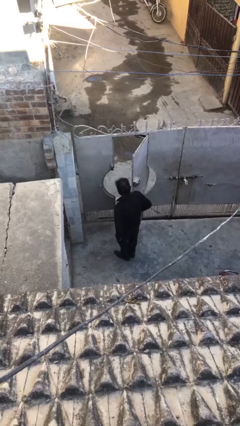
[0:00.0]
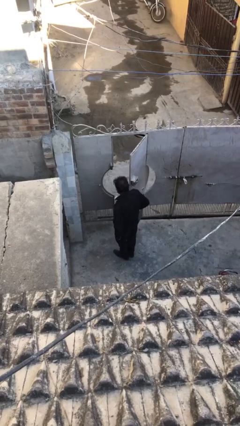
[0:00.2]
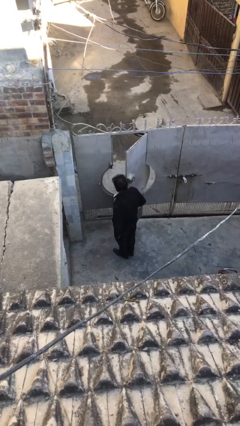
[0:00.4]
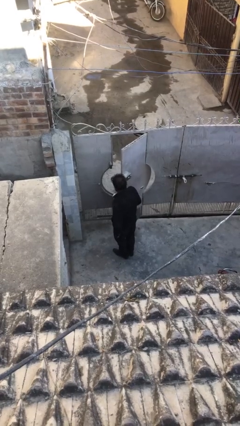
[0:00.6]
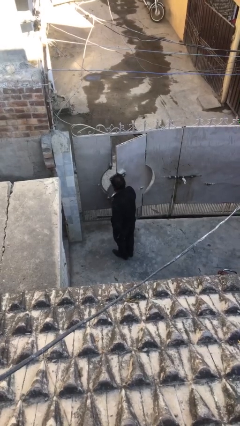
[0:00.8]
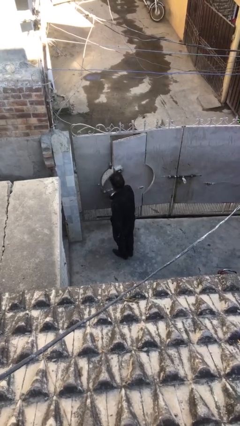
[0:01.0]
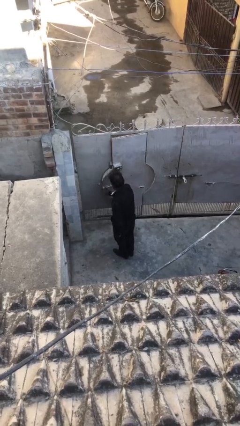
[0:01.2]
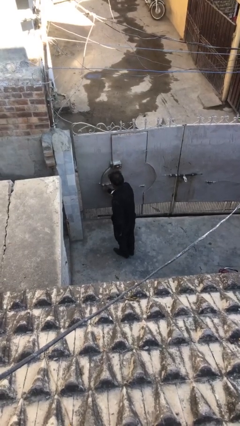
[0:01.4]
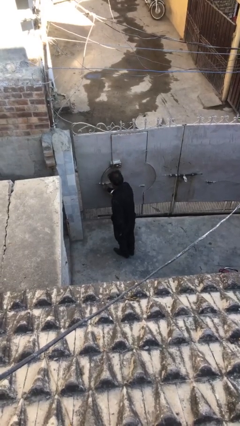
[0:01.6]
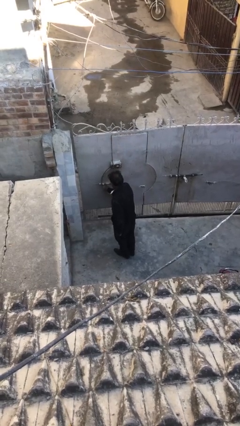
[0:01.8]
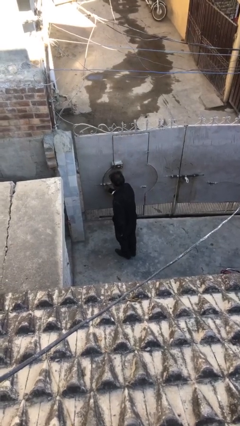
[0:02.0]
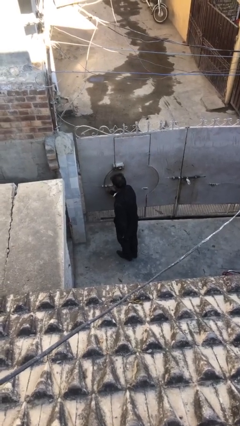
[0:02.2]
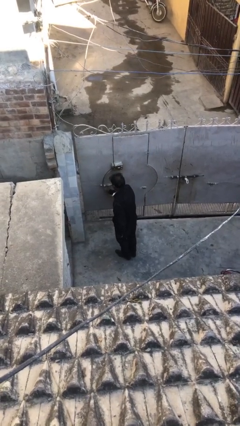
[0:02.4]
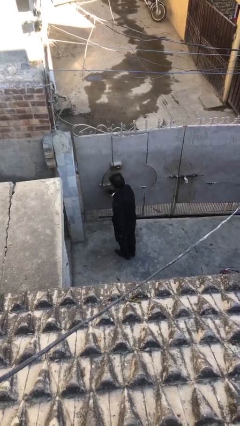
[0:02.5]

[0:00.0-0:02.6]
person closes facility door

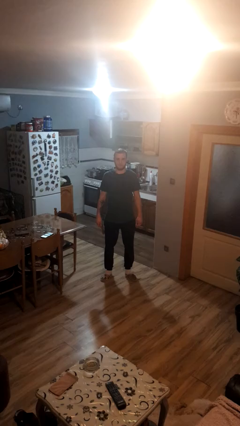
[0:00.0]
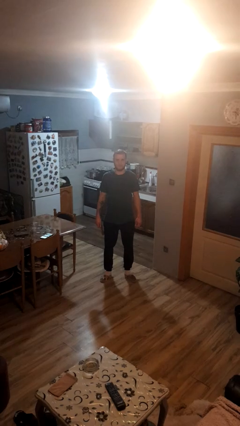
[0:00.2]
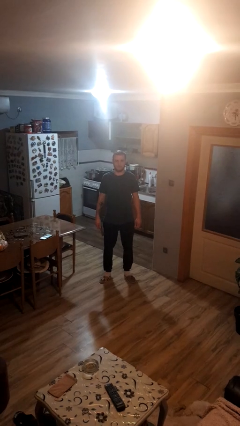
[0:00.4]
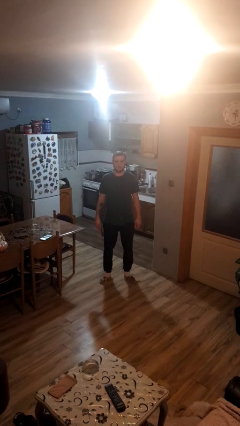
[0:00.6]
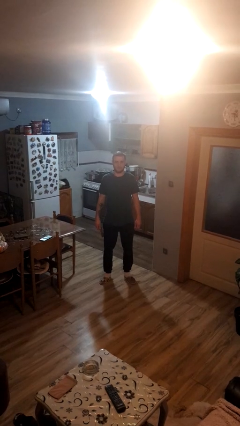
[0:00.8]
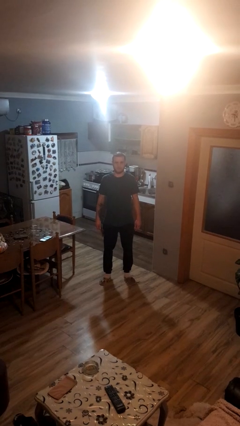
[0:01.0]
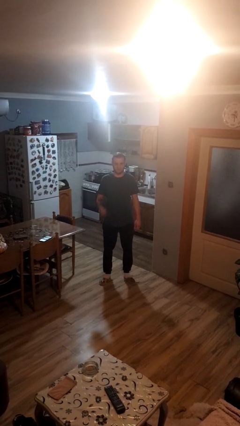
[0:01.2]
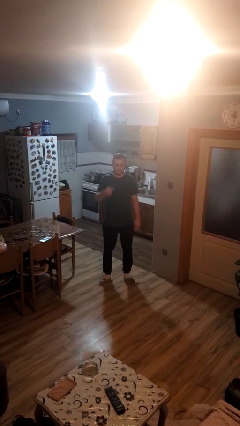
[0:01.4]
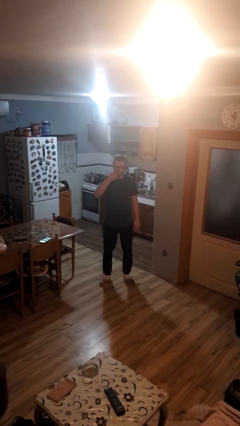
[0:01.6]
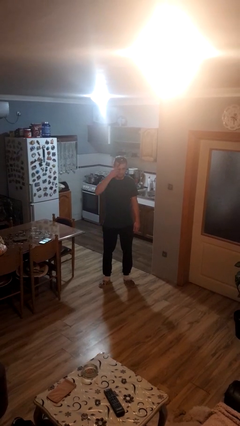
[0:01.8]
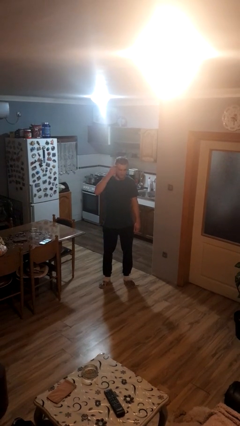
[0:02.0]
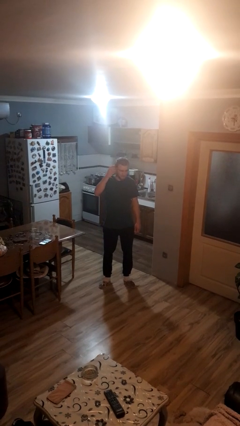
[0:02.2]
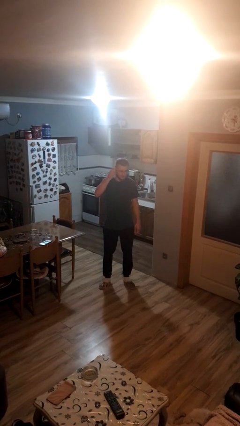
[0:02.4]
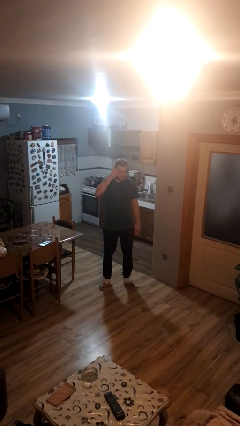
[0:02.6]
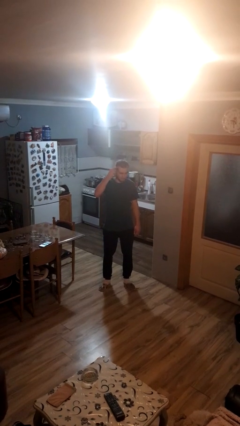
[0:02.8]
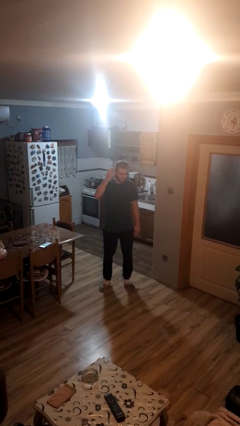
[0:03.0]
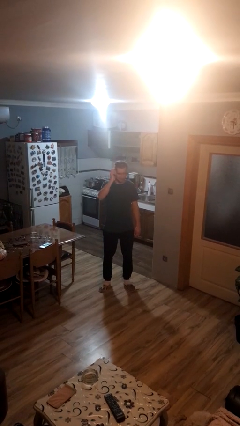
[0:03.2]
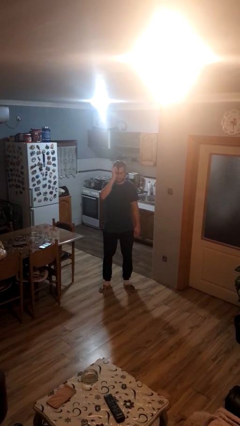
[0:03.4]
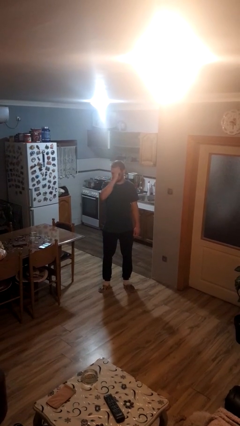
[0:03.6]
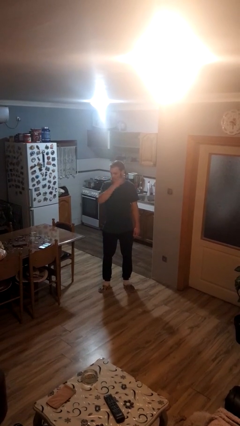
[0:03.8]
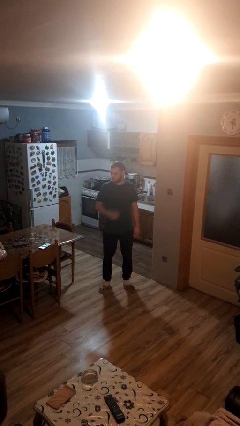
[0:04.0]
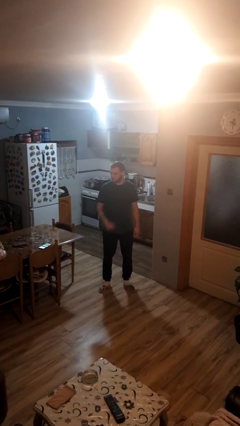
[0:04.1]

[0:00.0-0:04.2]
person brushes hair

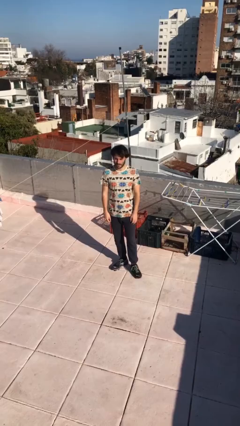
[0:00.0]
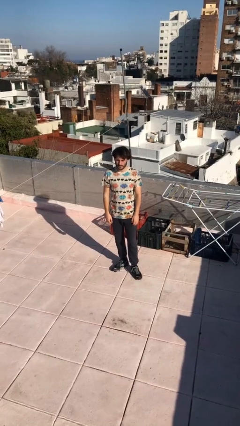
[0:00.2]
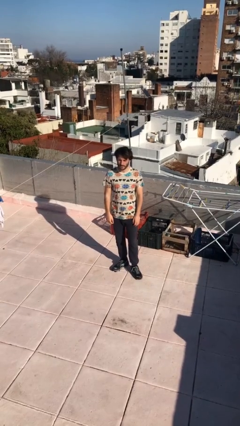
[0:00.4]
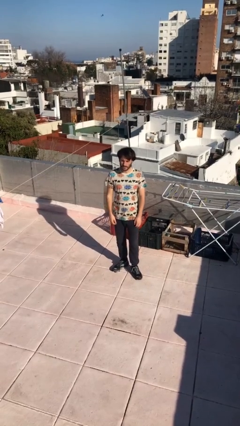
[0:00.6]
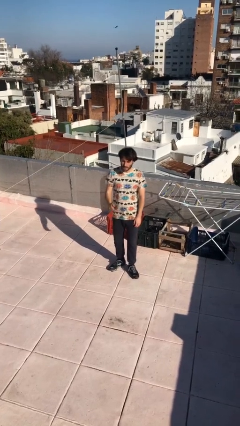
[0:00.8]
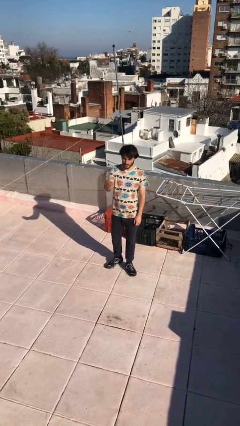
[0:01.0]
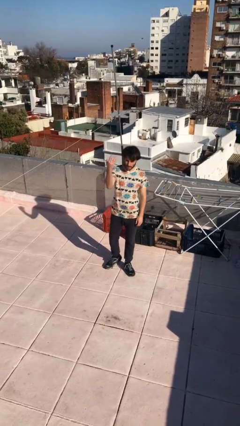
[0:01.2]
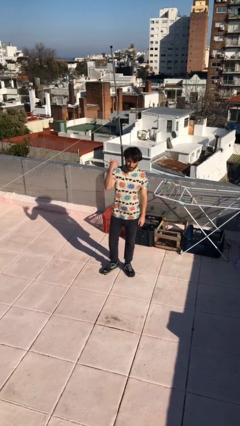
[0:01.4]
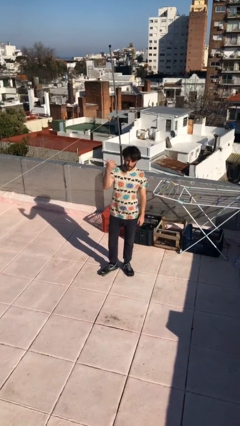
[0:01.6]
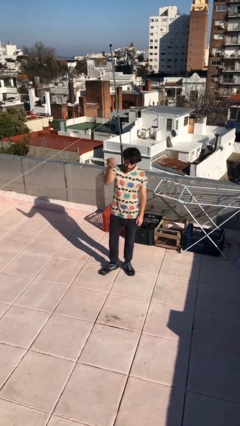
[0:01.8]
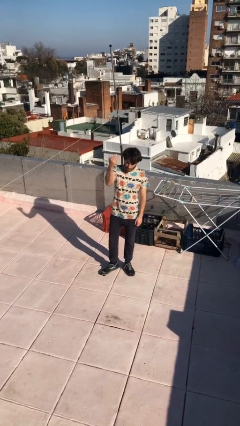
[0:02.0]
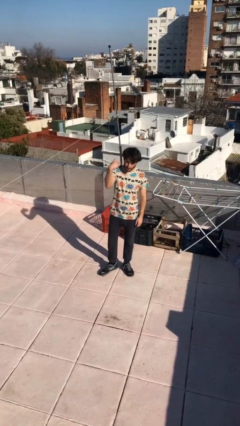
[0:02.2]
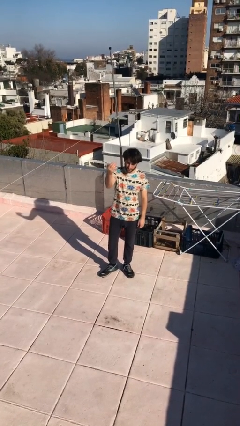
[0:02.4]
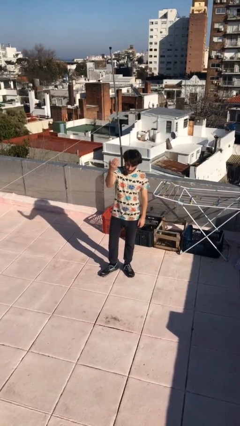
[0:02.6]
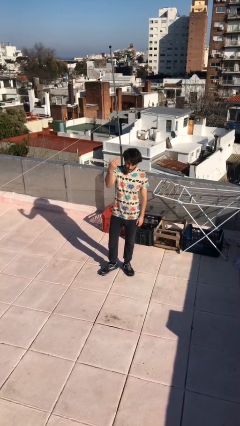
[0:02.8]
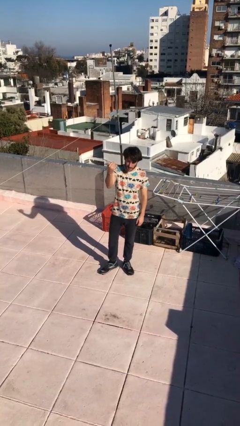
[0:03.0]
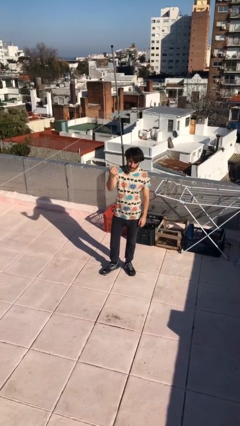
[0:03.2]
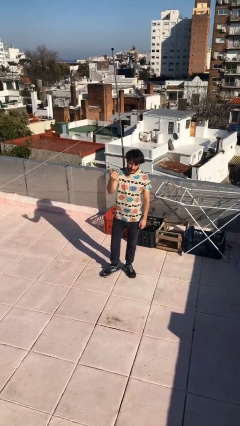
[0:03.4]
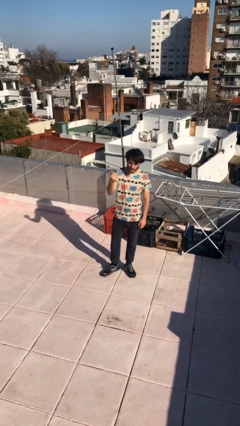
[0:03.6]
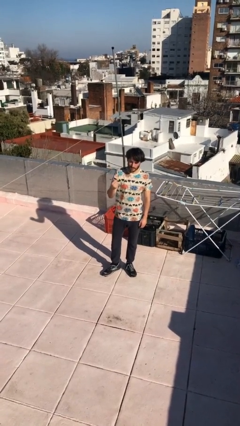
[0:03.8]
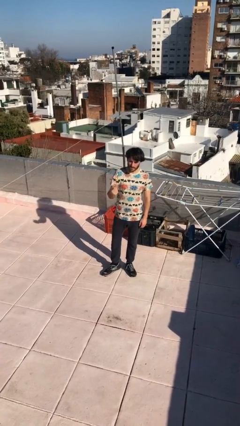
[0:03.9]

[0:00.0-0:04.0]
person gestures come here

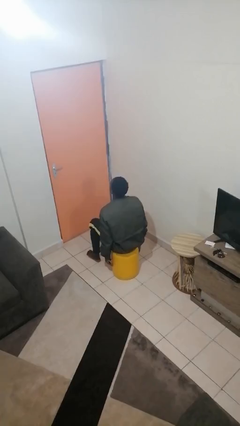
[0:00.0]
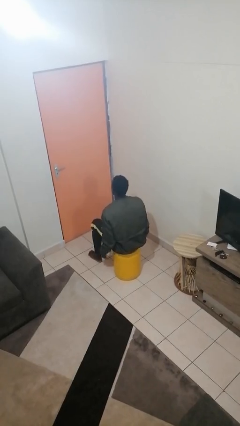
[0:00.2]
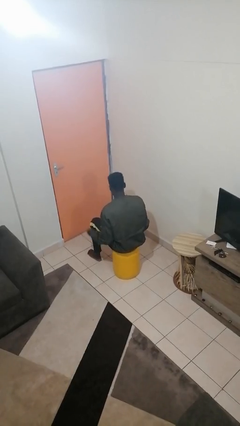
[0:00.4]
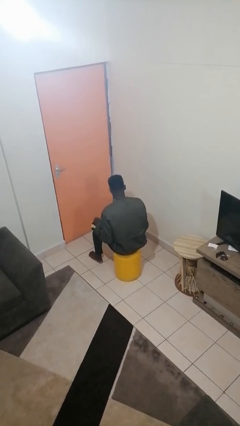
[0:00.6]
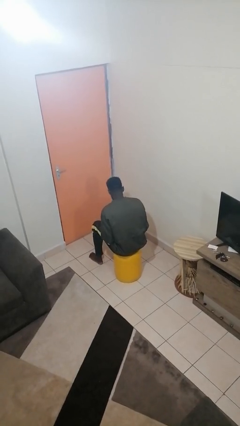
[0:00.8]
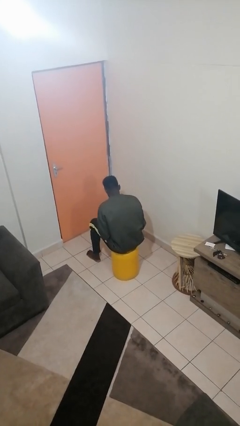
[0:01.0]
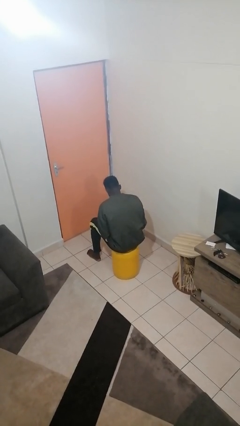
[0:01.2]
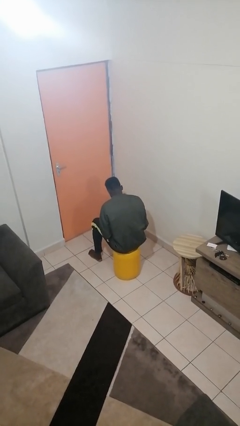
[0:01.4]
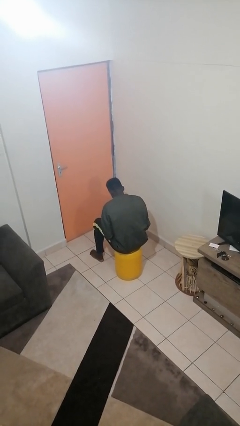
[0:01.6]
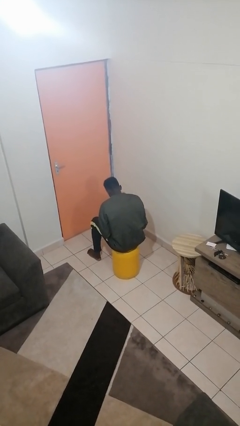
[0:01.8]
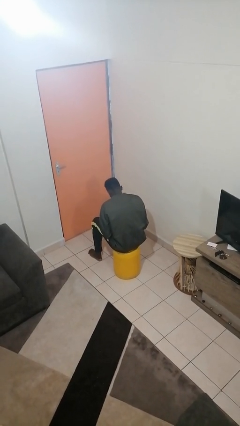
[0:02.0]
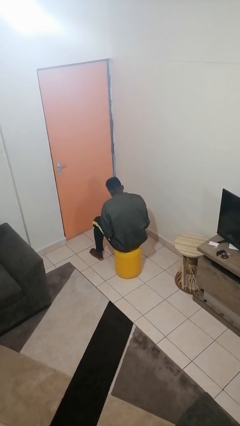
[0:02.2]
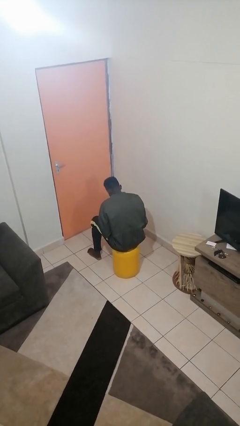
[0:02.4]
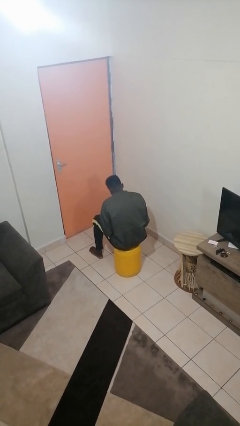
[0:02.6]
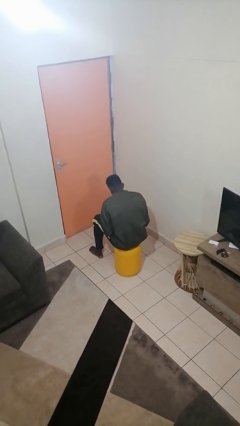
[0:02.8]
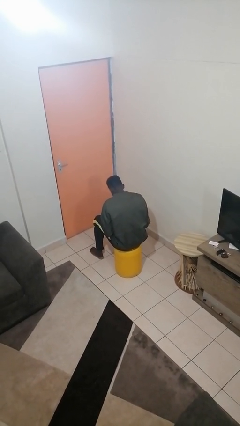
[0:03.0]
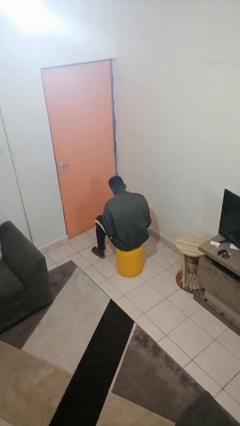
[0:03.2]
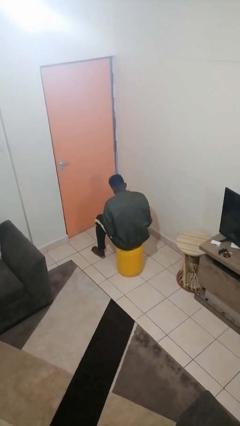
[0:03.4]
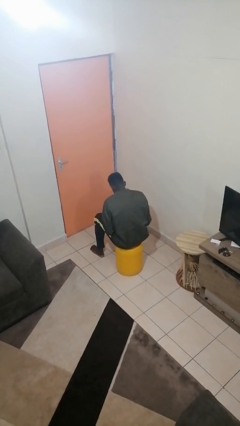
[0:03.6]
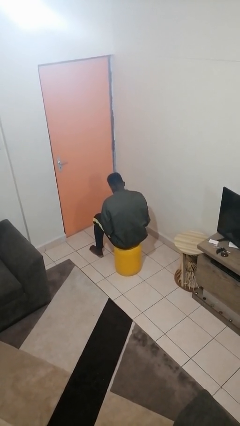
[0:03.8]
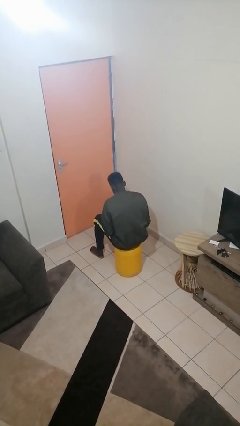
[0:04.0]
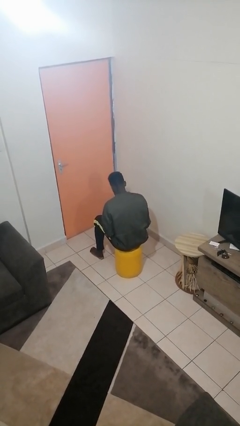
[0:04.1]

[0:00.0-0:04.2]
person looks at hands in lap

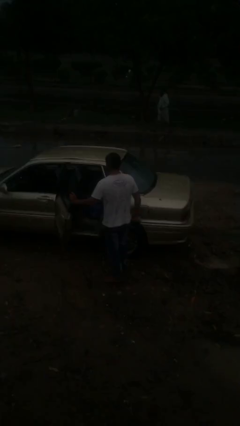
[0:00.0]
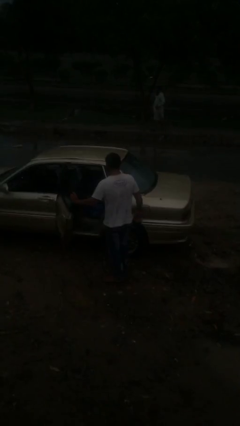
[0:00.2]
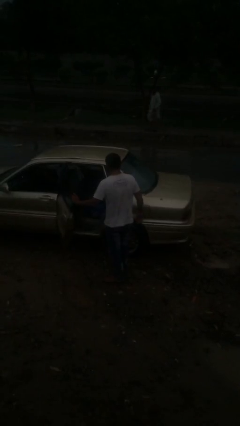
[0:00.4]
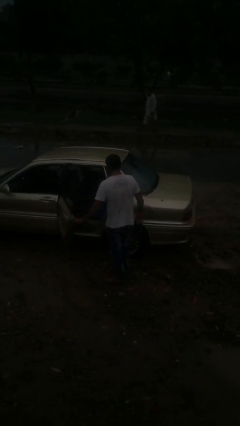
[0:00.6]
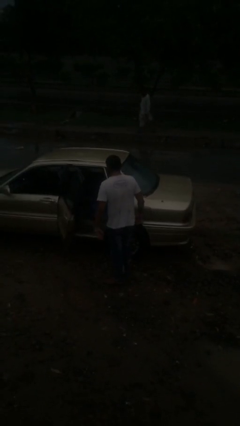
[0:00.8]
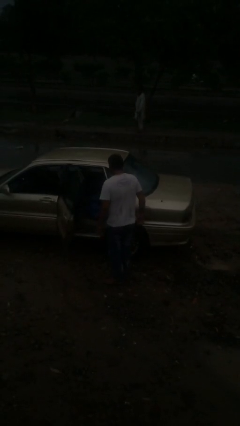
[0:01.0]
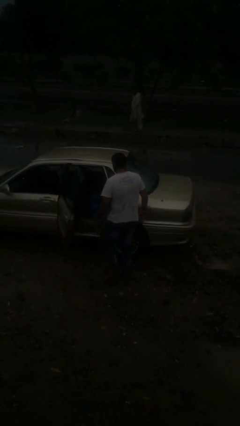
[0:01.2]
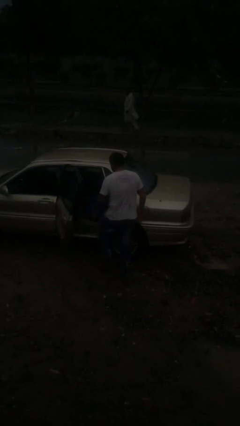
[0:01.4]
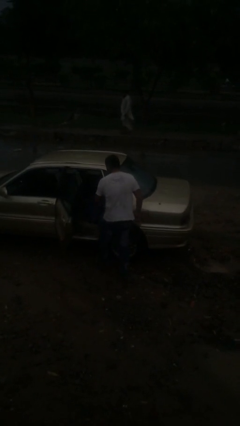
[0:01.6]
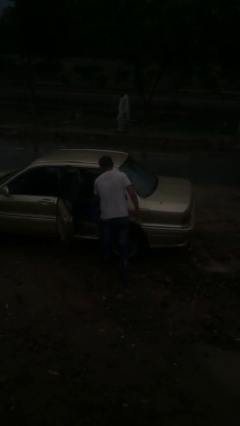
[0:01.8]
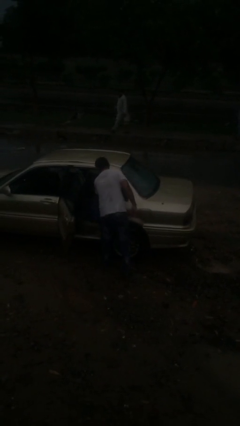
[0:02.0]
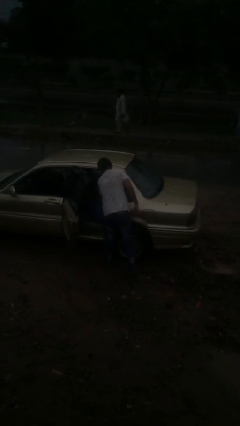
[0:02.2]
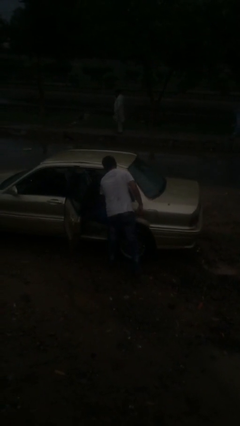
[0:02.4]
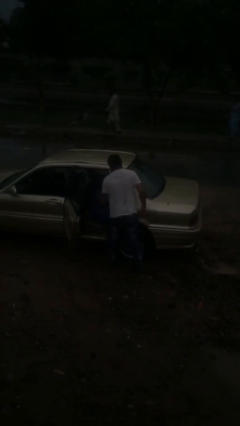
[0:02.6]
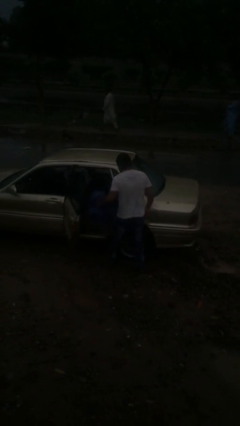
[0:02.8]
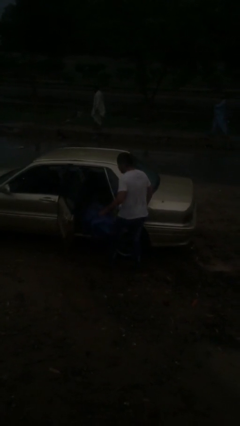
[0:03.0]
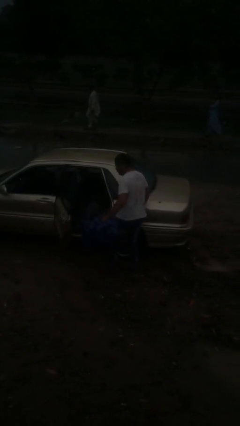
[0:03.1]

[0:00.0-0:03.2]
person unloads car
